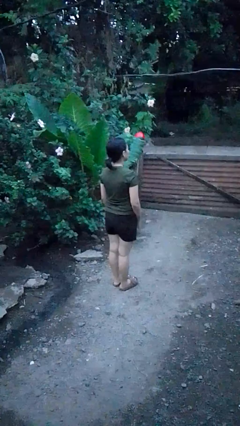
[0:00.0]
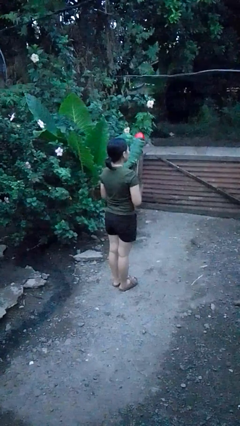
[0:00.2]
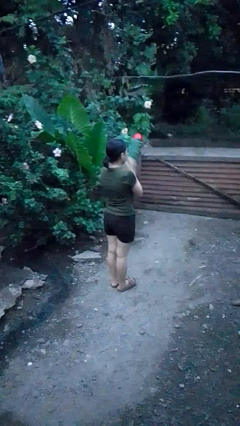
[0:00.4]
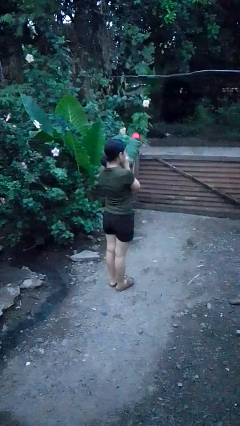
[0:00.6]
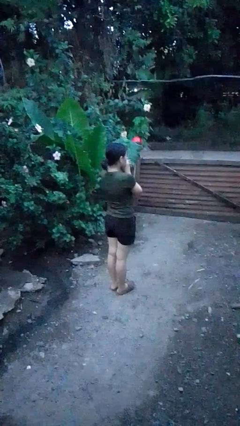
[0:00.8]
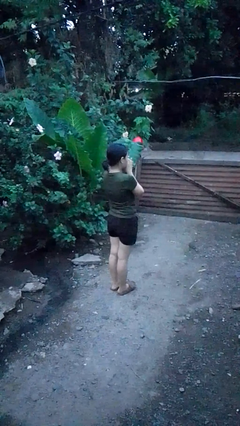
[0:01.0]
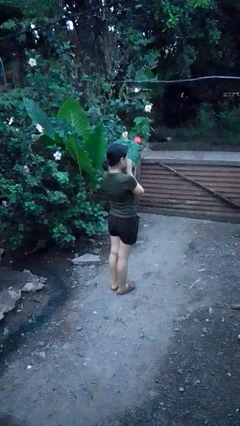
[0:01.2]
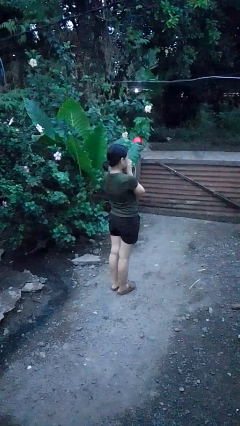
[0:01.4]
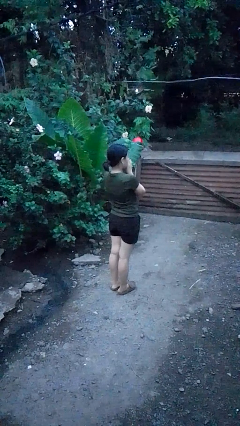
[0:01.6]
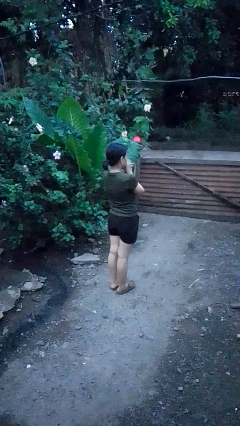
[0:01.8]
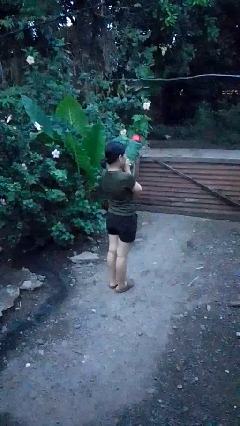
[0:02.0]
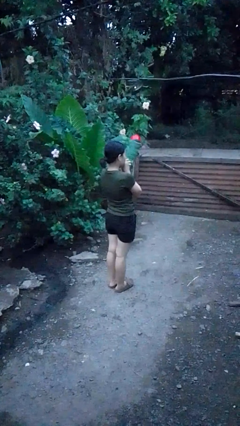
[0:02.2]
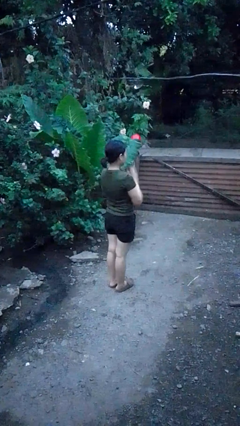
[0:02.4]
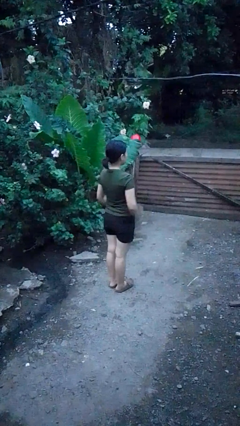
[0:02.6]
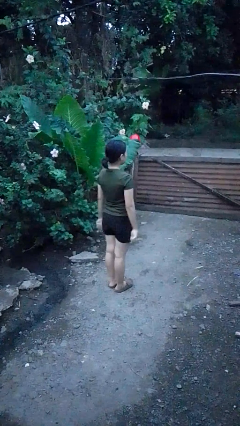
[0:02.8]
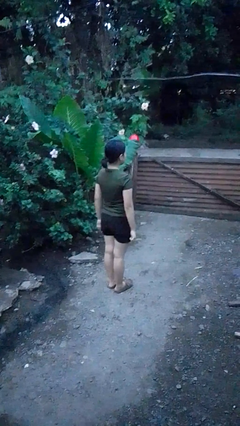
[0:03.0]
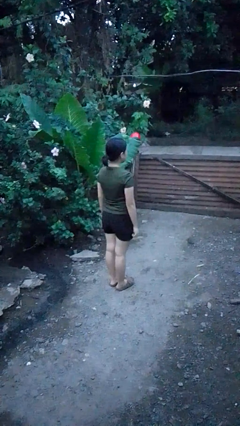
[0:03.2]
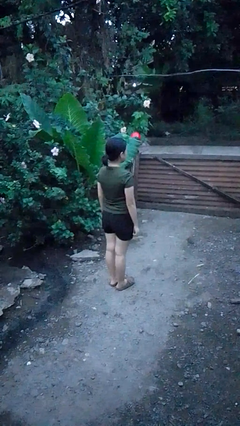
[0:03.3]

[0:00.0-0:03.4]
person blows into hands

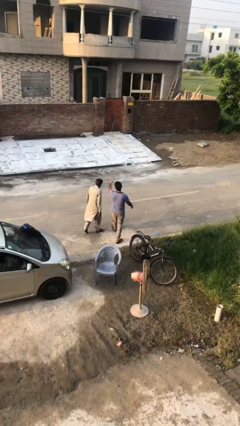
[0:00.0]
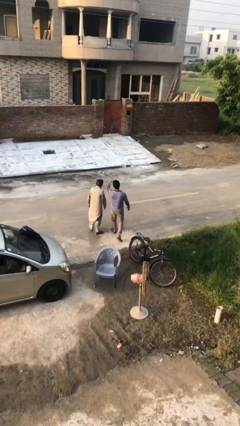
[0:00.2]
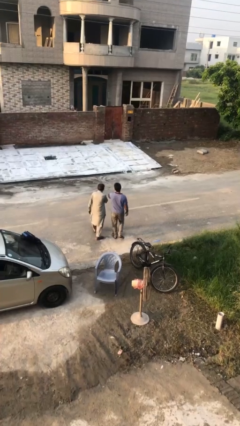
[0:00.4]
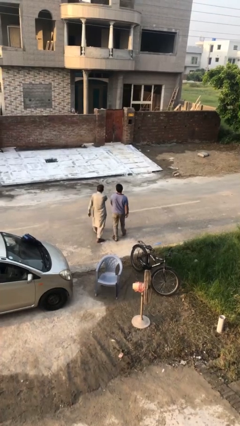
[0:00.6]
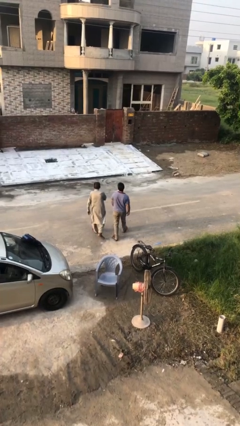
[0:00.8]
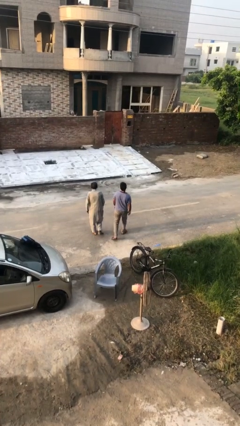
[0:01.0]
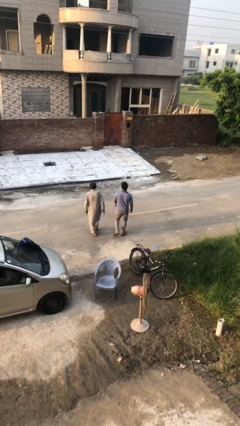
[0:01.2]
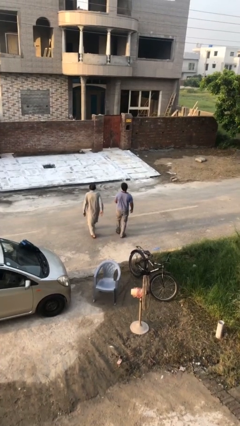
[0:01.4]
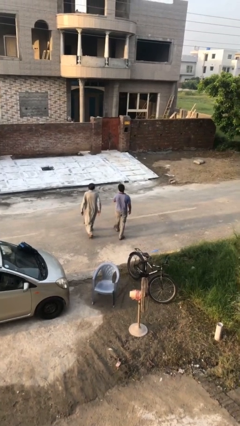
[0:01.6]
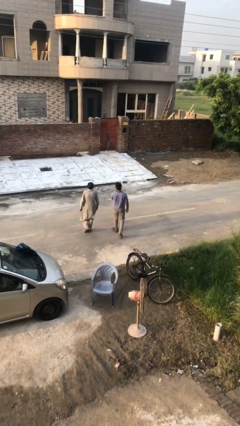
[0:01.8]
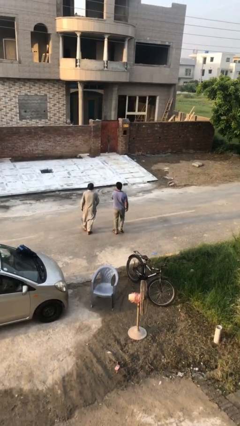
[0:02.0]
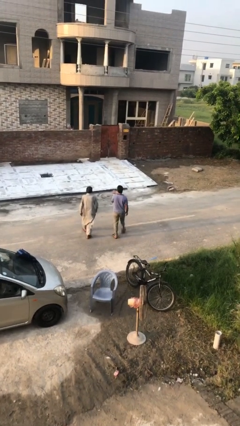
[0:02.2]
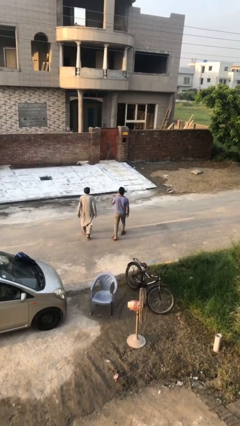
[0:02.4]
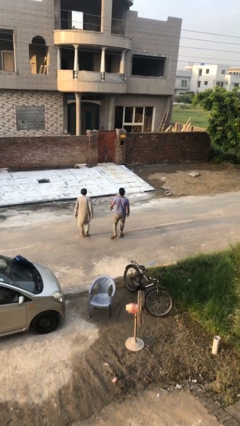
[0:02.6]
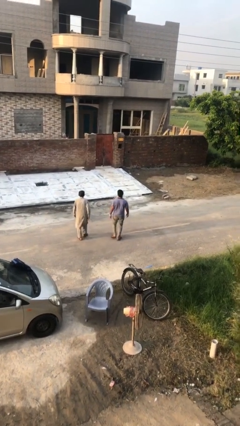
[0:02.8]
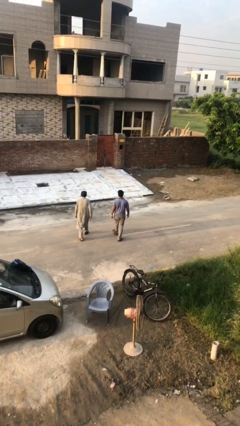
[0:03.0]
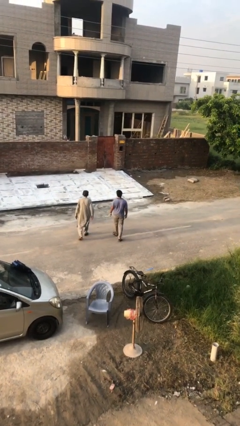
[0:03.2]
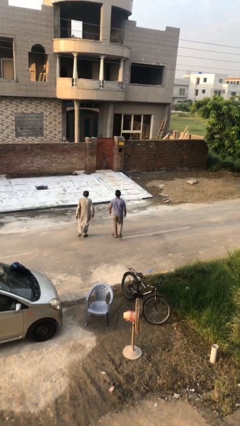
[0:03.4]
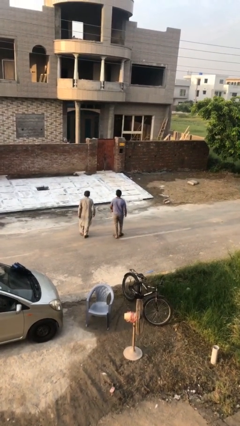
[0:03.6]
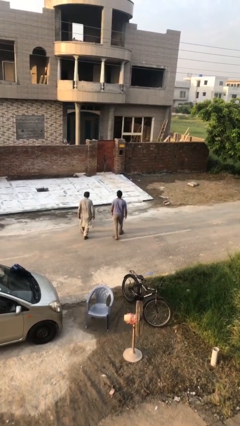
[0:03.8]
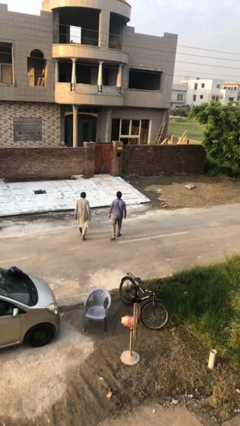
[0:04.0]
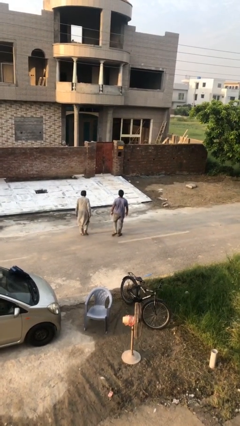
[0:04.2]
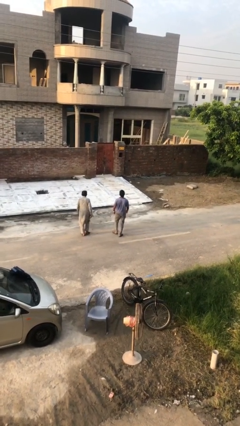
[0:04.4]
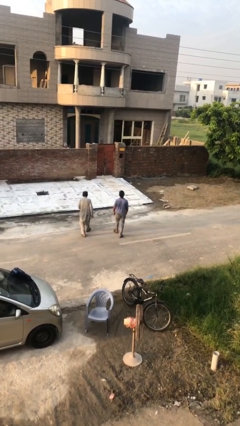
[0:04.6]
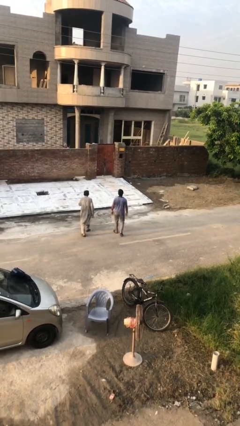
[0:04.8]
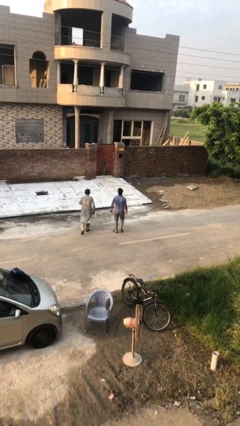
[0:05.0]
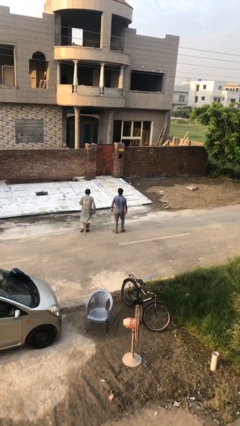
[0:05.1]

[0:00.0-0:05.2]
person talks to person

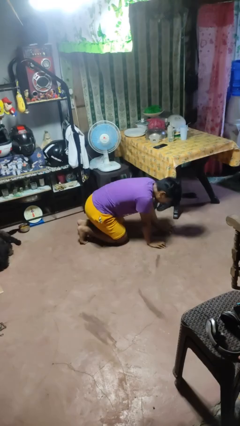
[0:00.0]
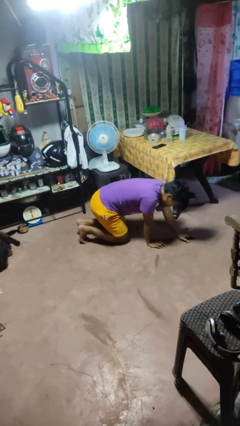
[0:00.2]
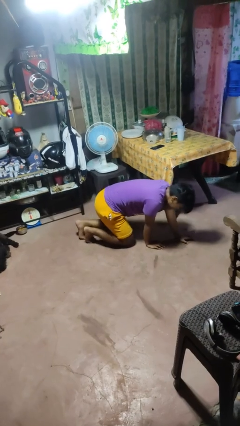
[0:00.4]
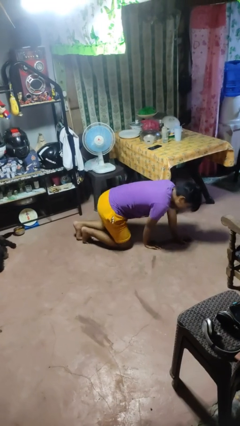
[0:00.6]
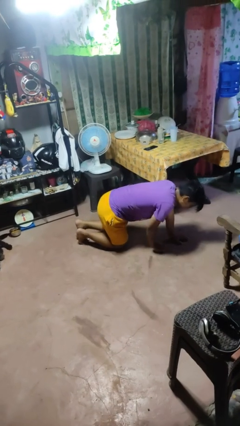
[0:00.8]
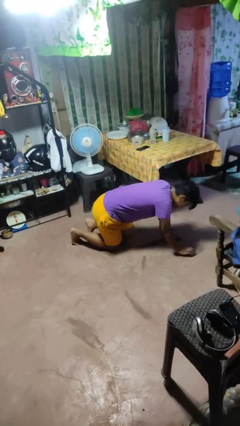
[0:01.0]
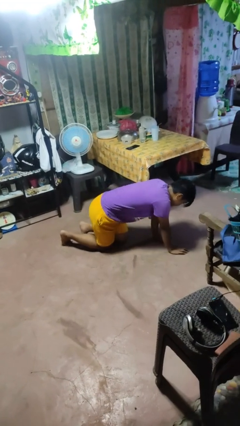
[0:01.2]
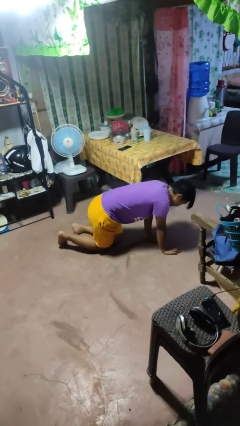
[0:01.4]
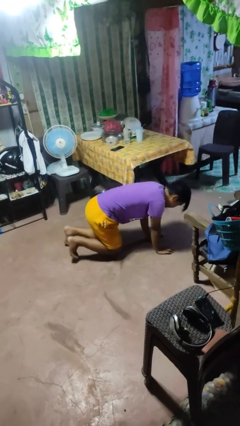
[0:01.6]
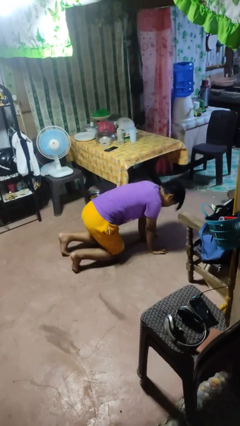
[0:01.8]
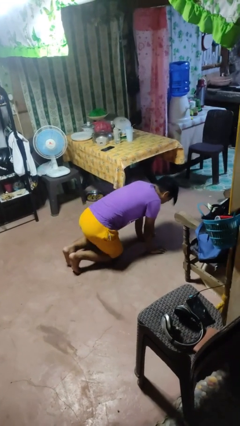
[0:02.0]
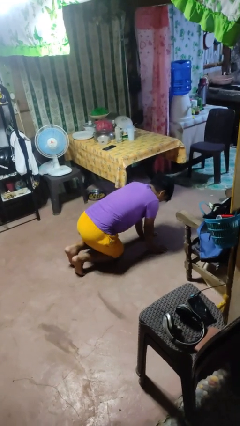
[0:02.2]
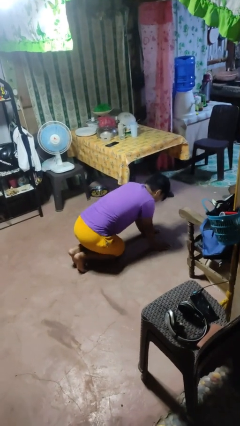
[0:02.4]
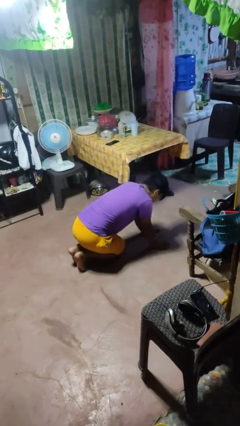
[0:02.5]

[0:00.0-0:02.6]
person crawls

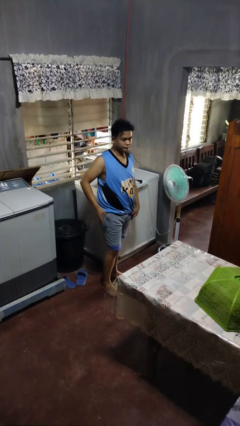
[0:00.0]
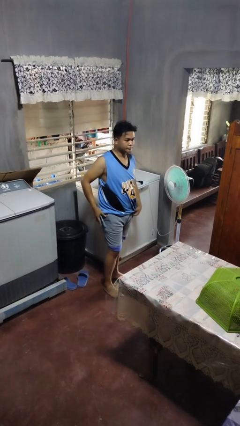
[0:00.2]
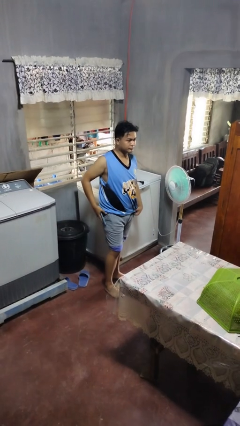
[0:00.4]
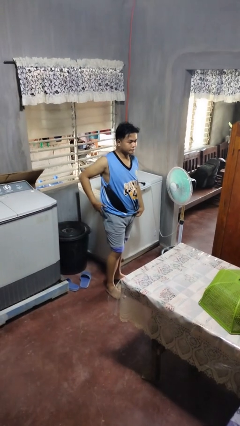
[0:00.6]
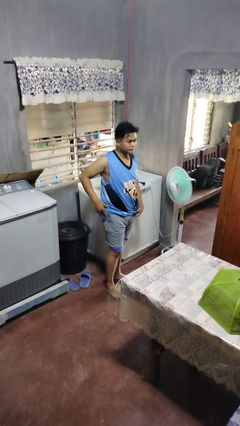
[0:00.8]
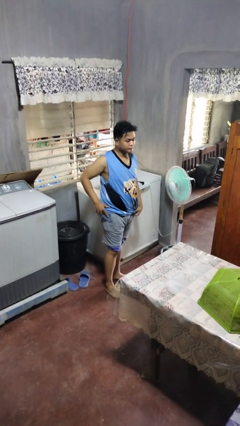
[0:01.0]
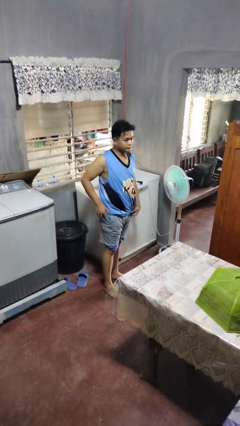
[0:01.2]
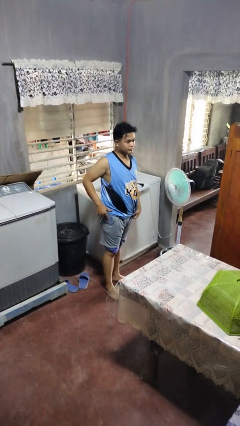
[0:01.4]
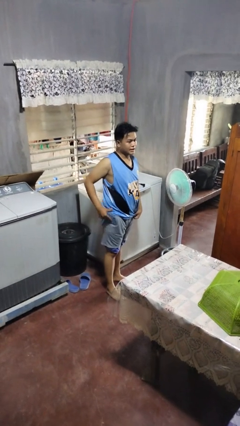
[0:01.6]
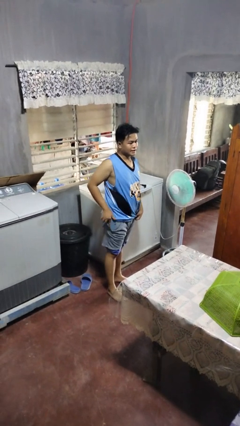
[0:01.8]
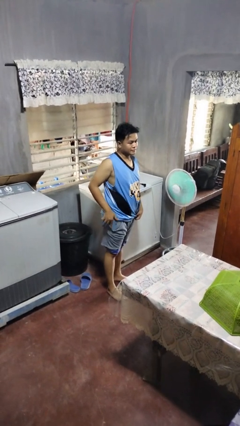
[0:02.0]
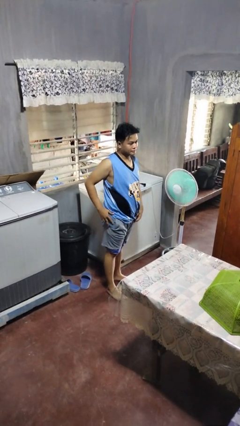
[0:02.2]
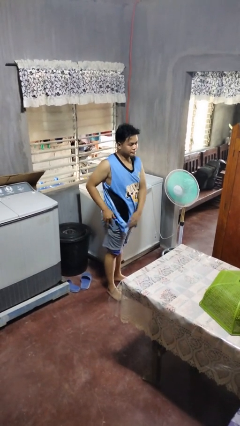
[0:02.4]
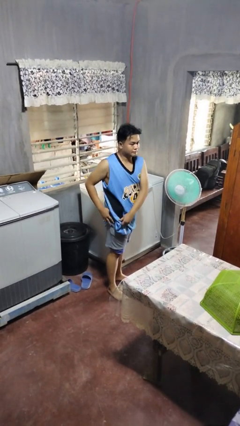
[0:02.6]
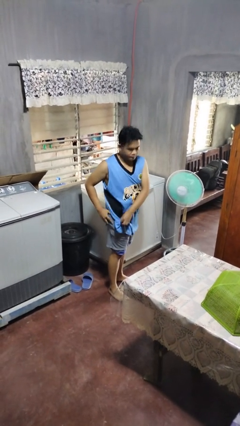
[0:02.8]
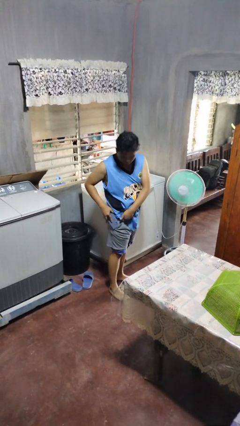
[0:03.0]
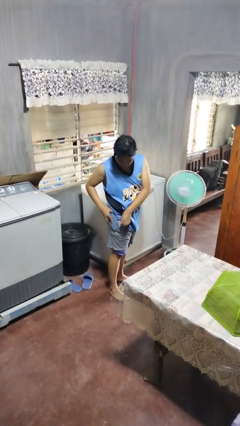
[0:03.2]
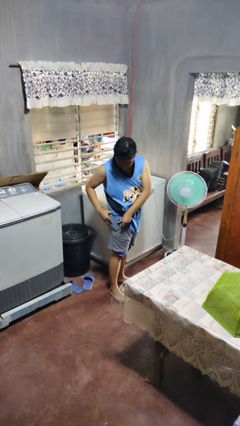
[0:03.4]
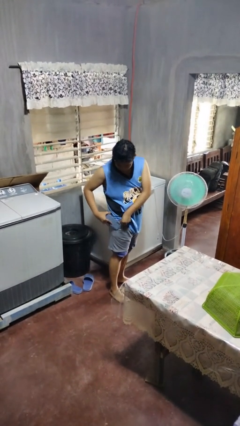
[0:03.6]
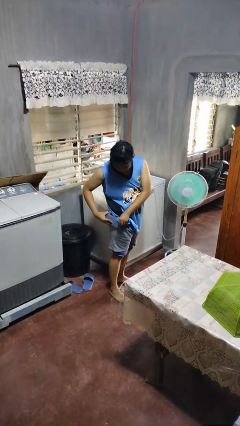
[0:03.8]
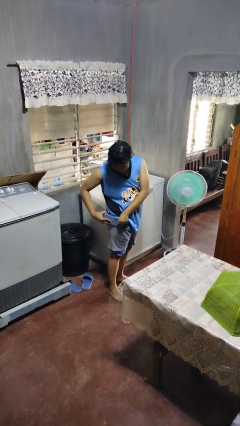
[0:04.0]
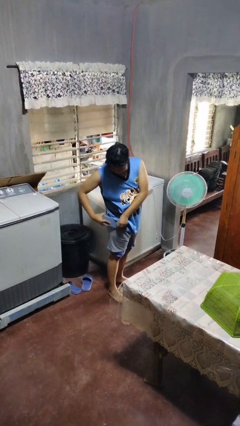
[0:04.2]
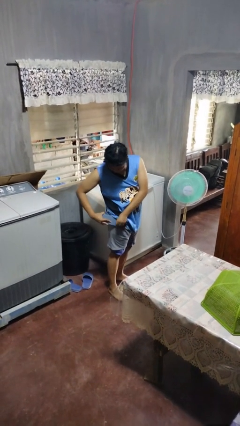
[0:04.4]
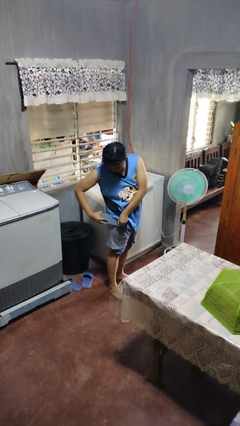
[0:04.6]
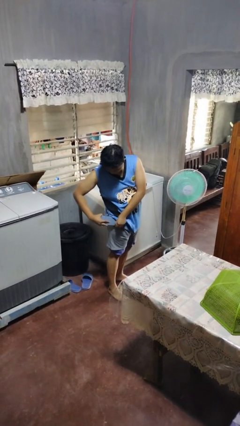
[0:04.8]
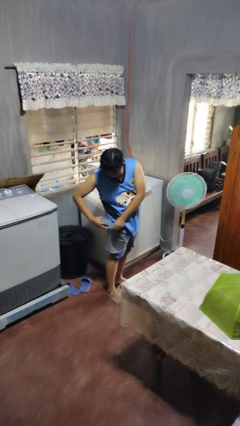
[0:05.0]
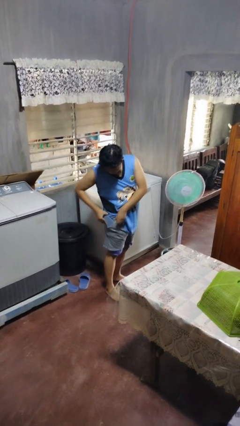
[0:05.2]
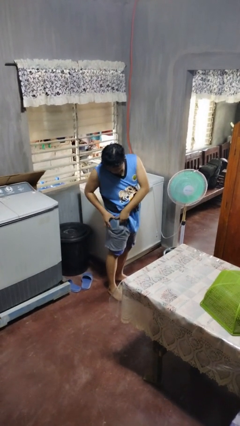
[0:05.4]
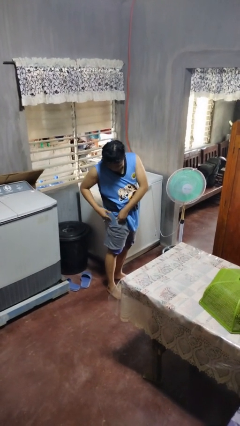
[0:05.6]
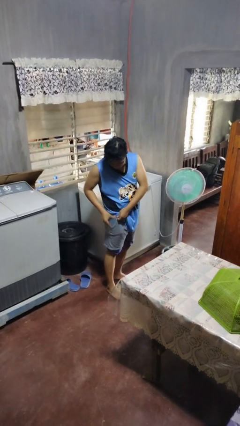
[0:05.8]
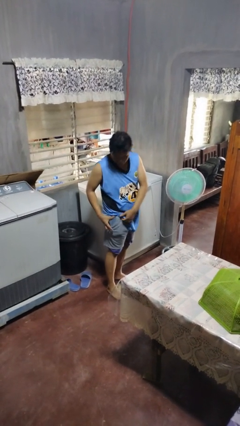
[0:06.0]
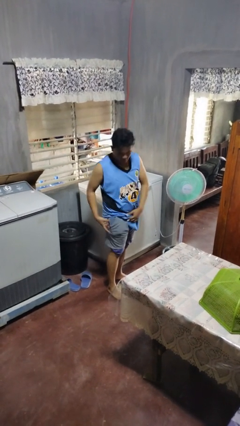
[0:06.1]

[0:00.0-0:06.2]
person puts phone into pocket

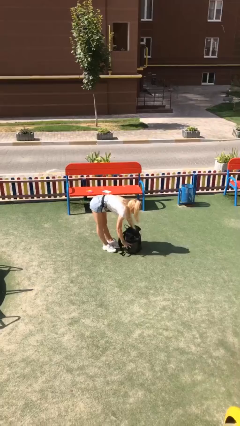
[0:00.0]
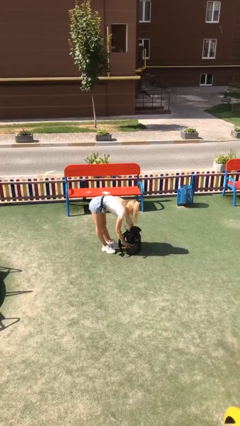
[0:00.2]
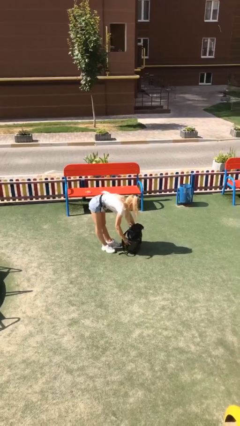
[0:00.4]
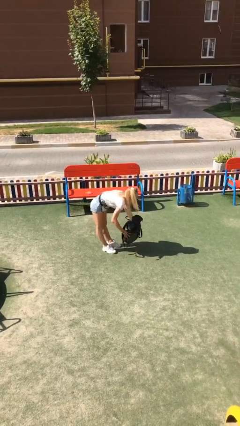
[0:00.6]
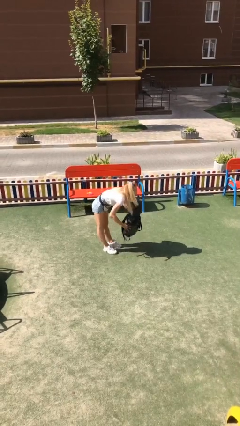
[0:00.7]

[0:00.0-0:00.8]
person picks up object from floor
